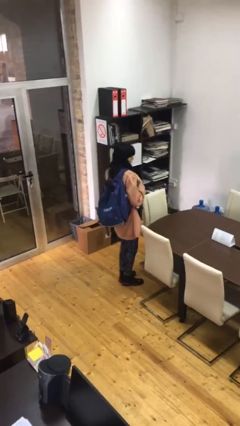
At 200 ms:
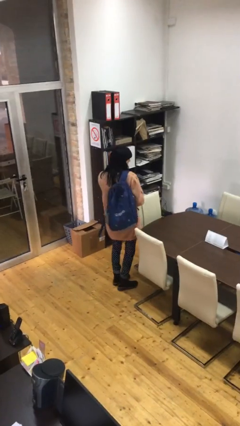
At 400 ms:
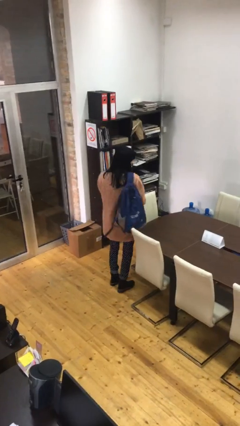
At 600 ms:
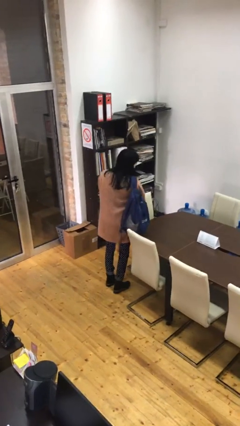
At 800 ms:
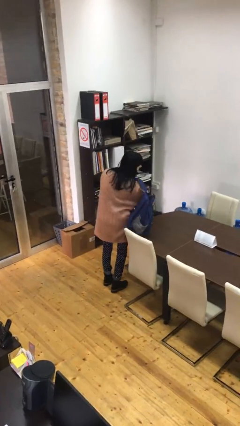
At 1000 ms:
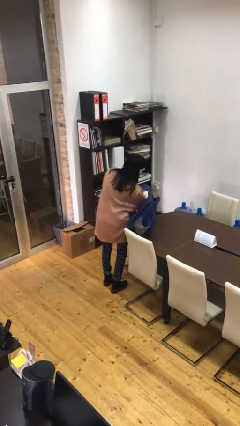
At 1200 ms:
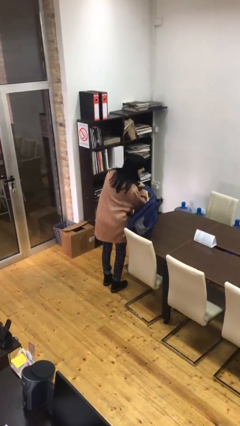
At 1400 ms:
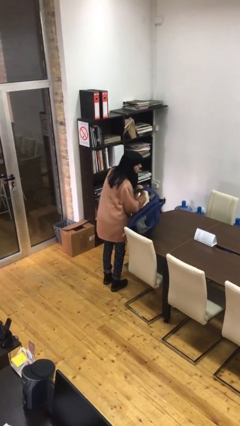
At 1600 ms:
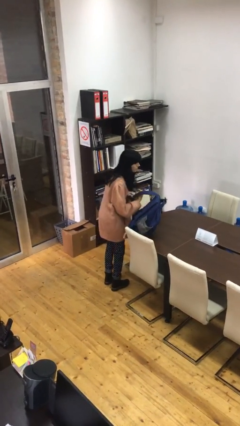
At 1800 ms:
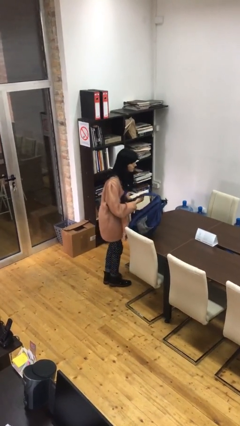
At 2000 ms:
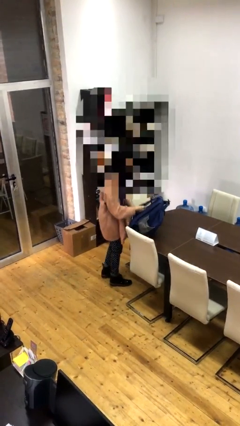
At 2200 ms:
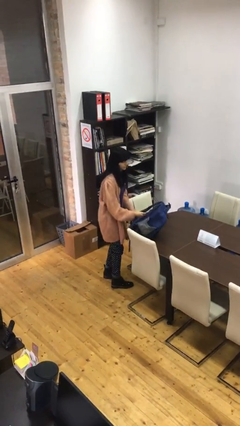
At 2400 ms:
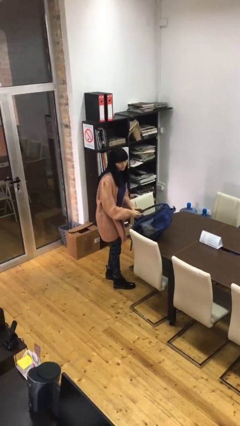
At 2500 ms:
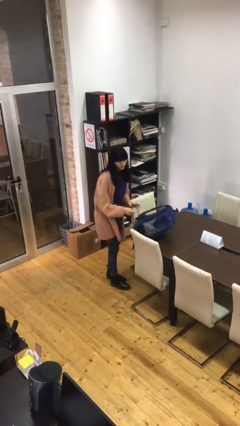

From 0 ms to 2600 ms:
person puts down object on table

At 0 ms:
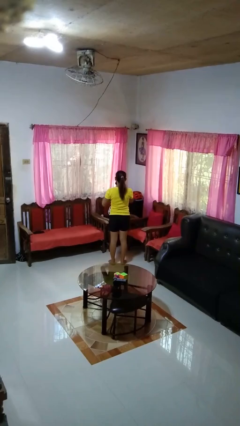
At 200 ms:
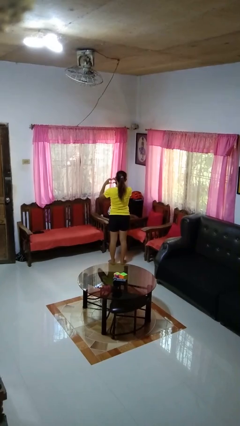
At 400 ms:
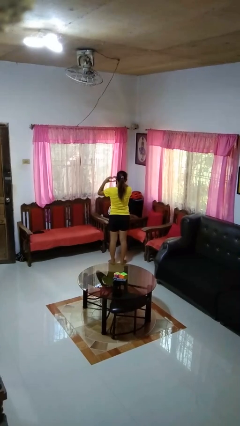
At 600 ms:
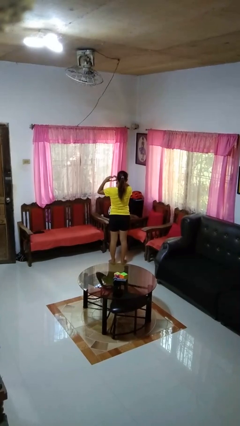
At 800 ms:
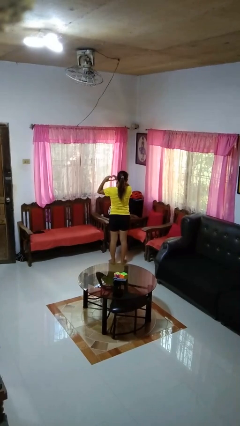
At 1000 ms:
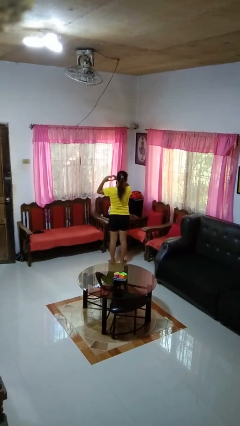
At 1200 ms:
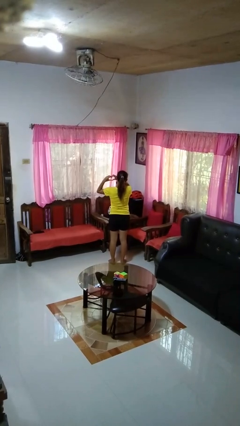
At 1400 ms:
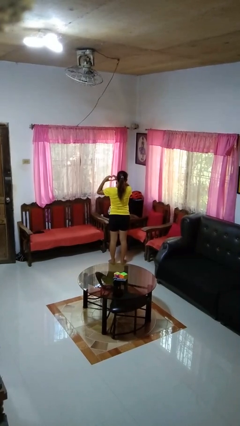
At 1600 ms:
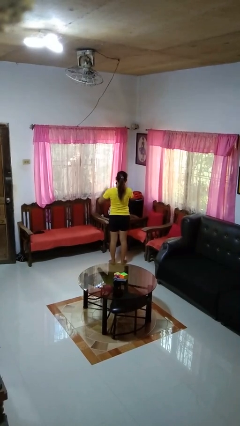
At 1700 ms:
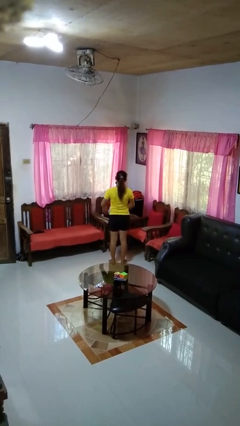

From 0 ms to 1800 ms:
person gestures heart

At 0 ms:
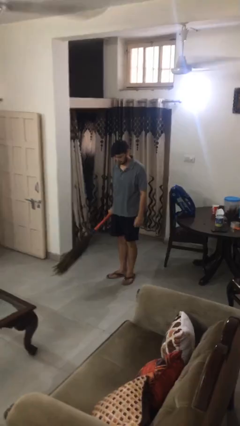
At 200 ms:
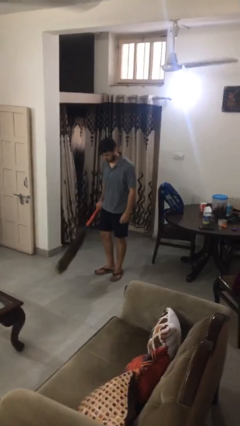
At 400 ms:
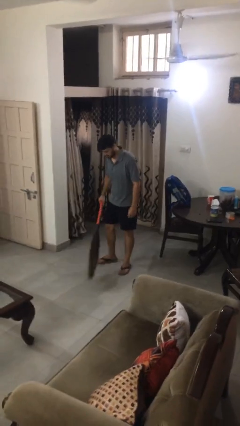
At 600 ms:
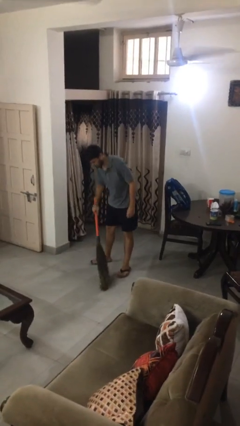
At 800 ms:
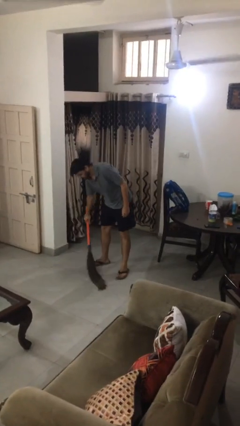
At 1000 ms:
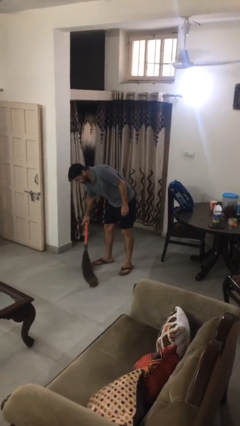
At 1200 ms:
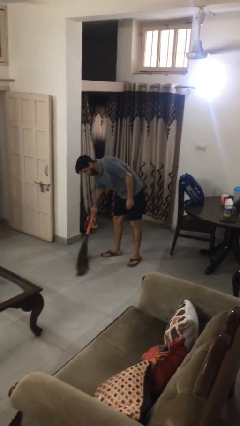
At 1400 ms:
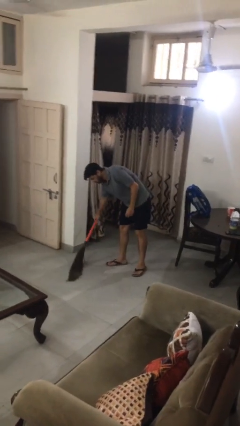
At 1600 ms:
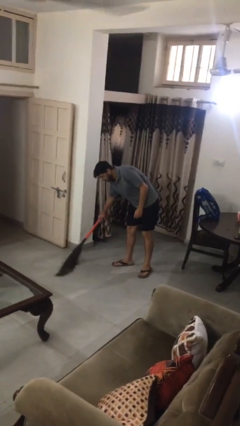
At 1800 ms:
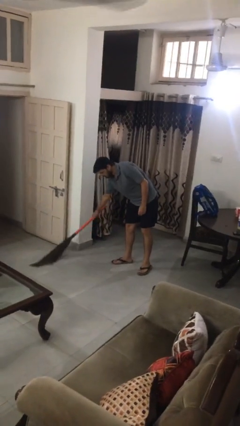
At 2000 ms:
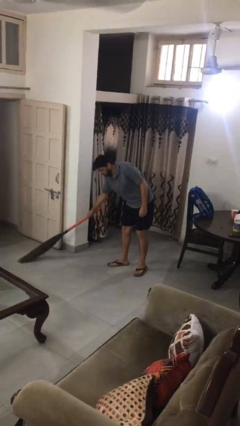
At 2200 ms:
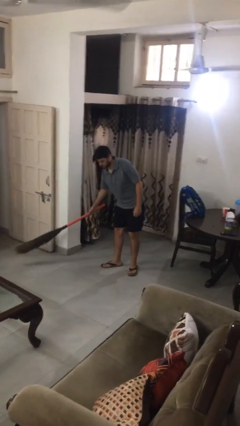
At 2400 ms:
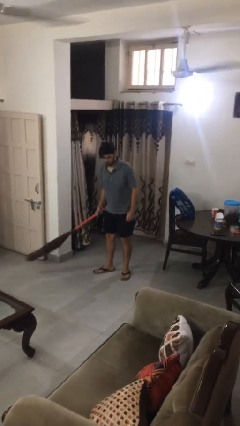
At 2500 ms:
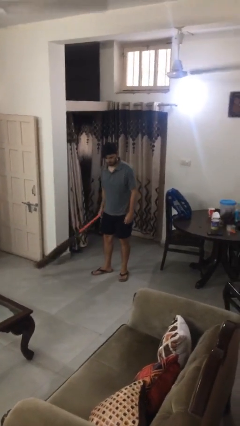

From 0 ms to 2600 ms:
person sweeps floor

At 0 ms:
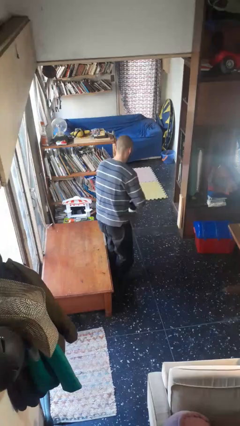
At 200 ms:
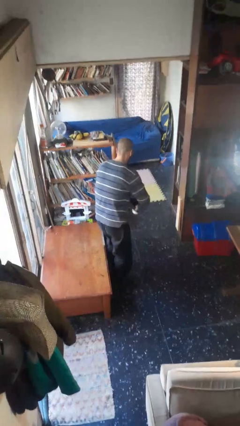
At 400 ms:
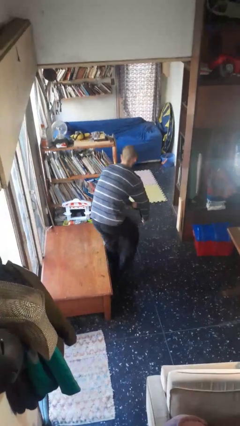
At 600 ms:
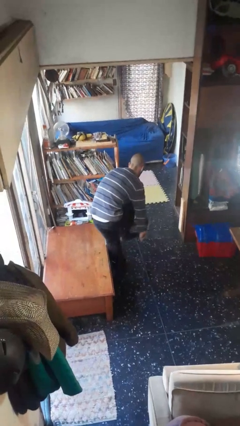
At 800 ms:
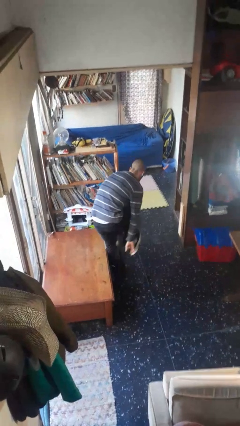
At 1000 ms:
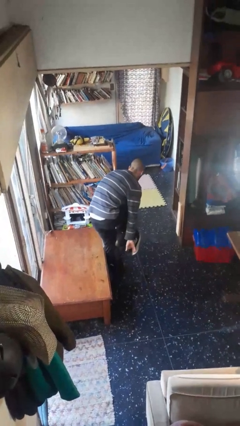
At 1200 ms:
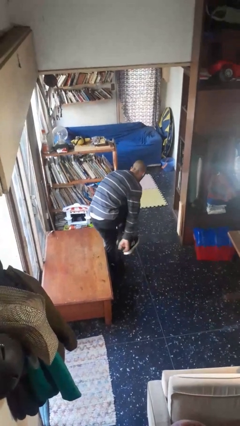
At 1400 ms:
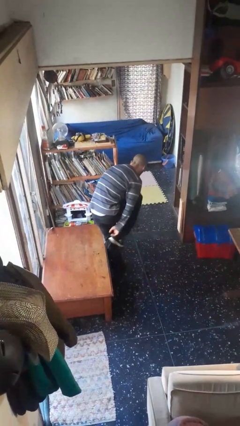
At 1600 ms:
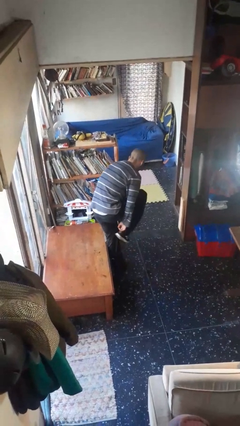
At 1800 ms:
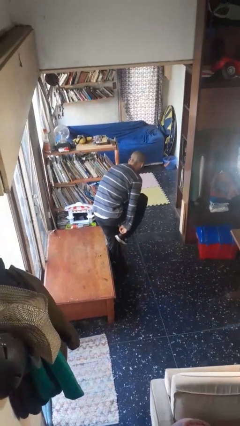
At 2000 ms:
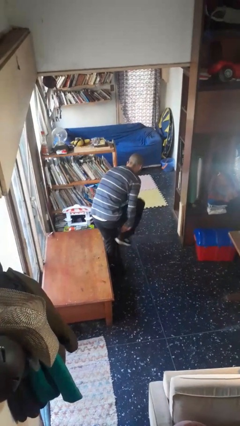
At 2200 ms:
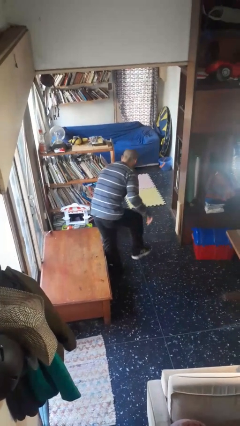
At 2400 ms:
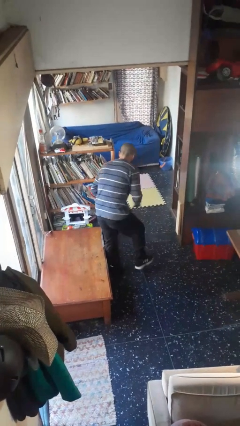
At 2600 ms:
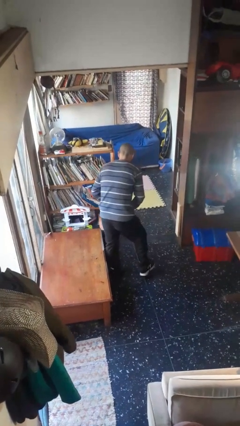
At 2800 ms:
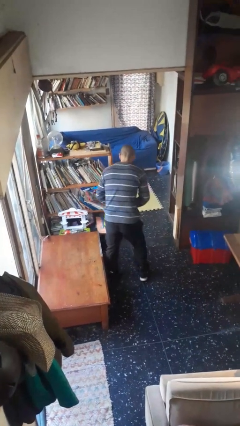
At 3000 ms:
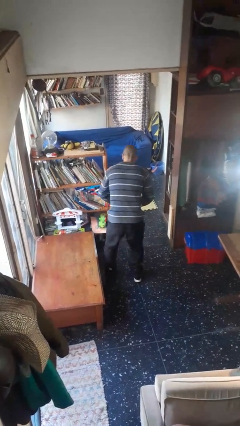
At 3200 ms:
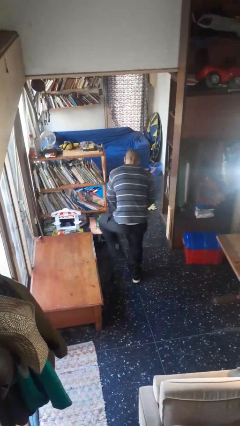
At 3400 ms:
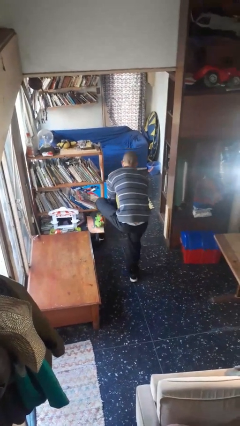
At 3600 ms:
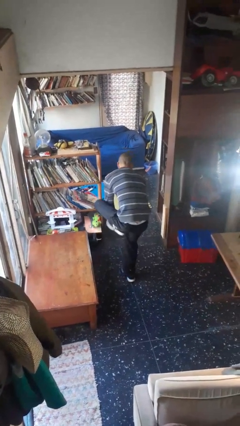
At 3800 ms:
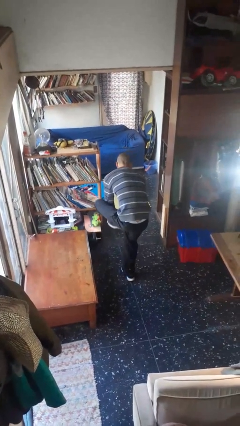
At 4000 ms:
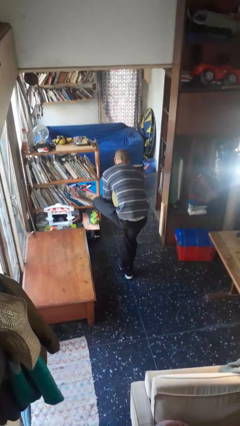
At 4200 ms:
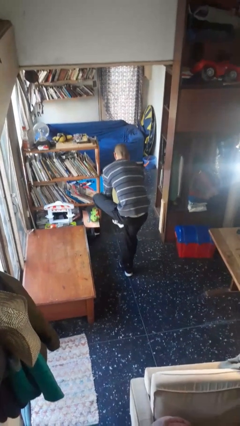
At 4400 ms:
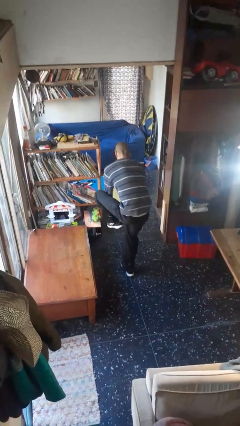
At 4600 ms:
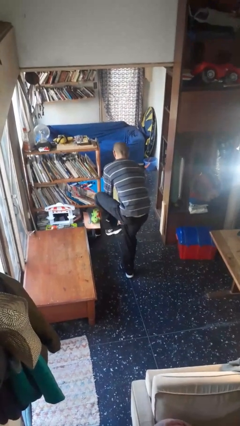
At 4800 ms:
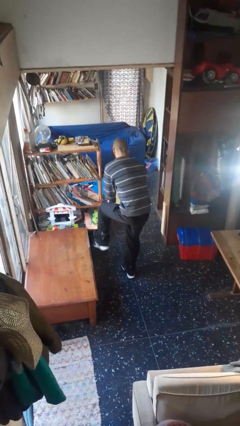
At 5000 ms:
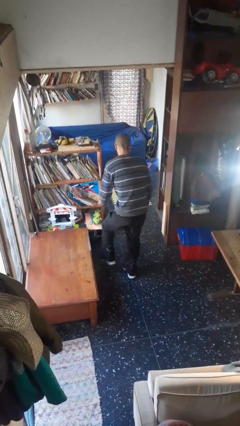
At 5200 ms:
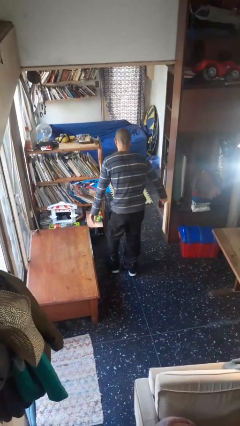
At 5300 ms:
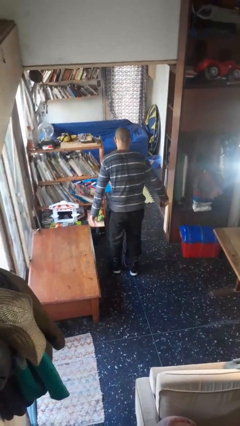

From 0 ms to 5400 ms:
person puts on shoes

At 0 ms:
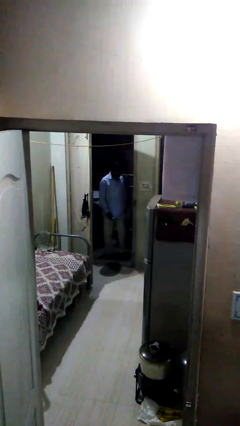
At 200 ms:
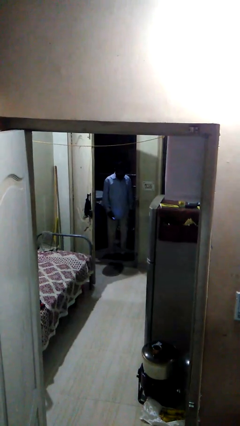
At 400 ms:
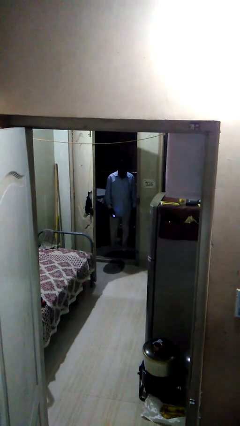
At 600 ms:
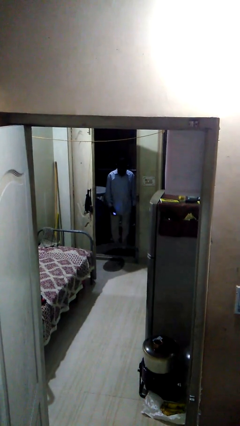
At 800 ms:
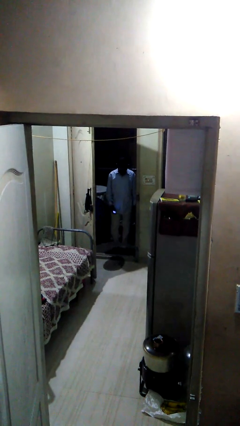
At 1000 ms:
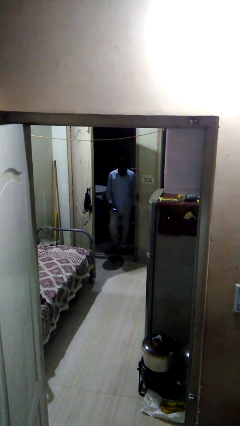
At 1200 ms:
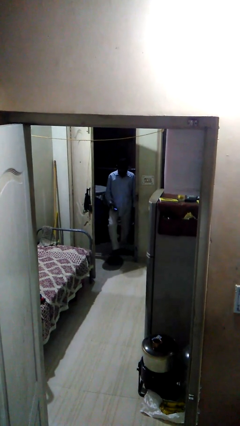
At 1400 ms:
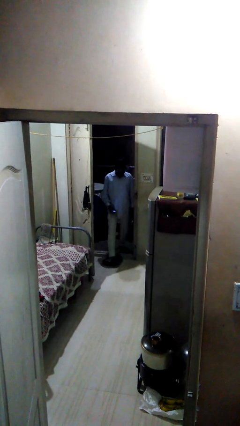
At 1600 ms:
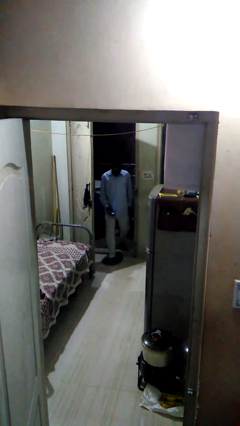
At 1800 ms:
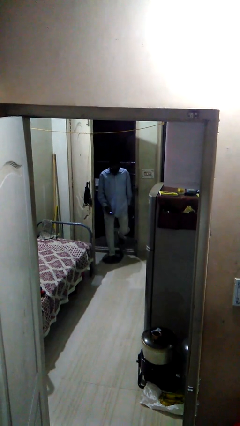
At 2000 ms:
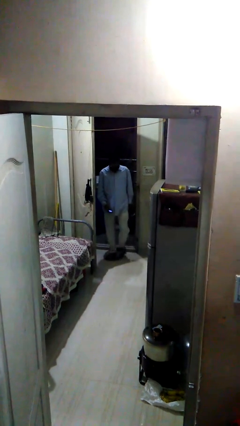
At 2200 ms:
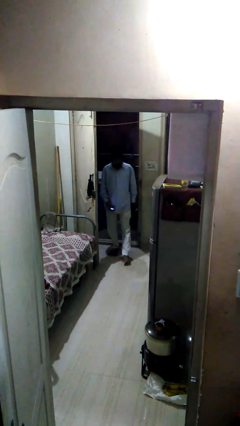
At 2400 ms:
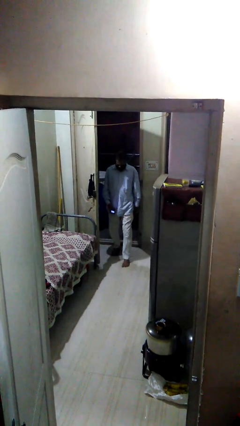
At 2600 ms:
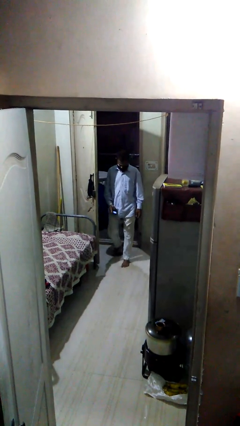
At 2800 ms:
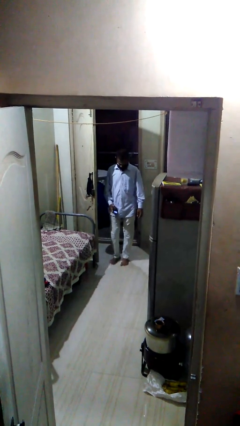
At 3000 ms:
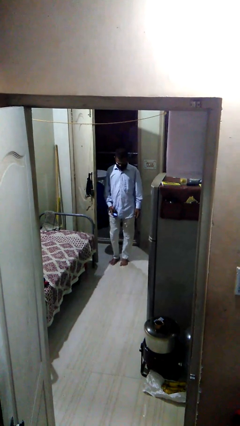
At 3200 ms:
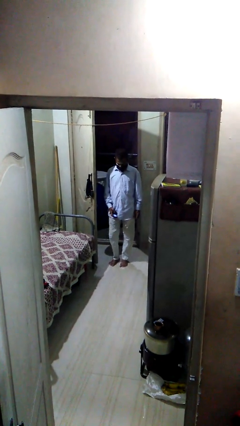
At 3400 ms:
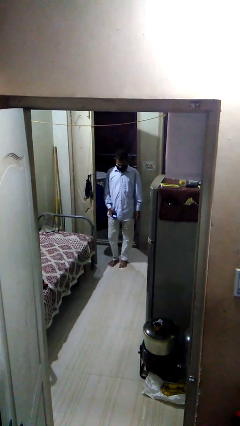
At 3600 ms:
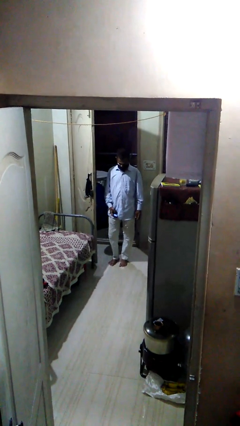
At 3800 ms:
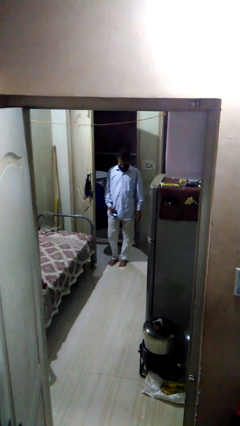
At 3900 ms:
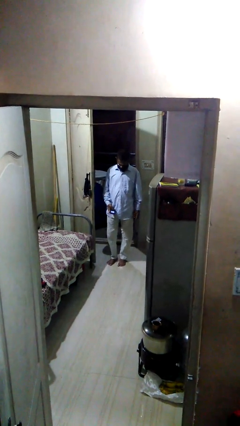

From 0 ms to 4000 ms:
person enters scene through structure

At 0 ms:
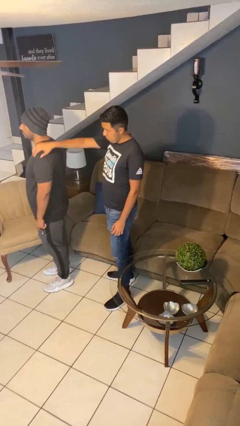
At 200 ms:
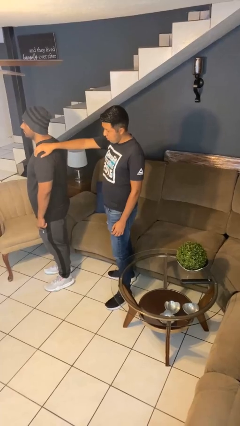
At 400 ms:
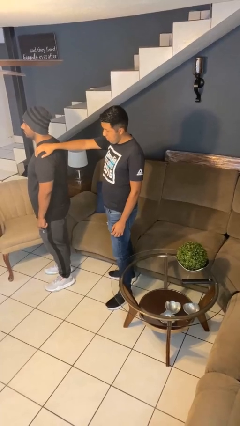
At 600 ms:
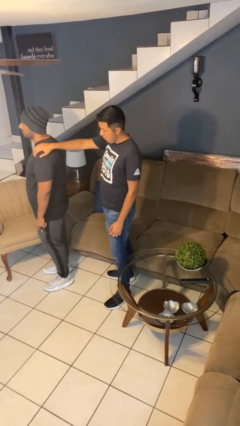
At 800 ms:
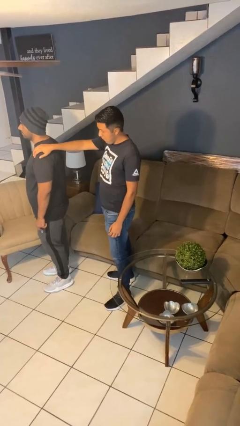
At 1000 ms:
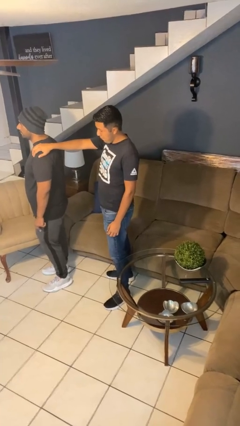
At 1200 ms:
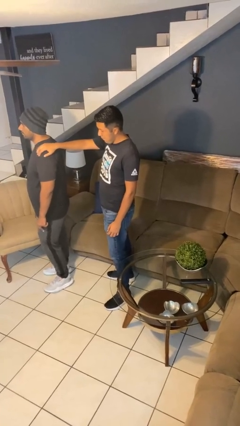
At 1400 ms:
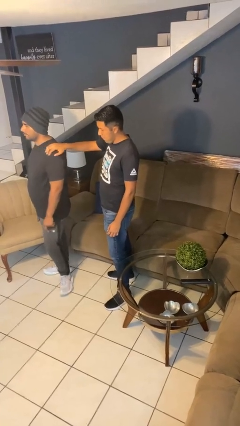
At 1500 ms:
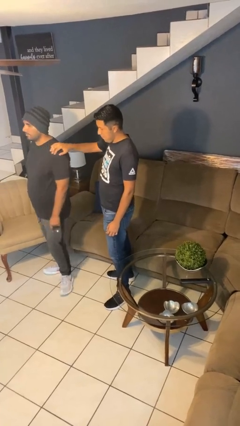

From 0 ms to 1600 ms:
person grabs person by shoulder
